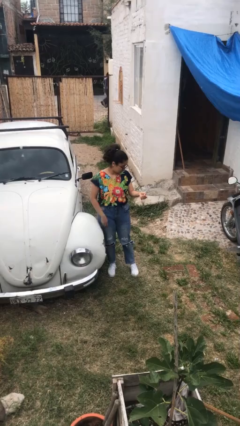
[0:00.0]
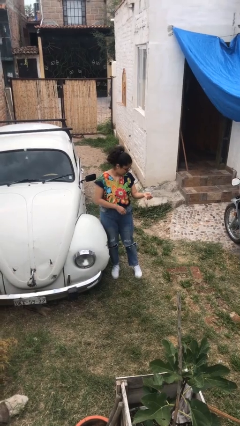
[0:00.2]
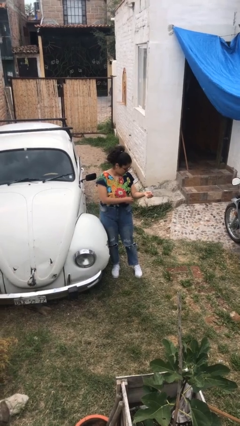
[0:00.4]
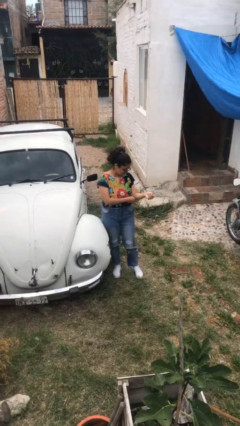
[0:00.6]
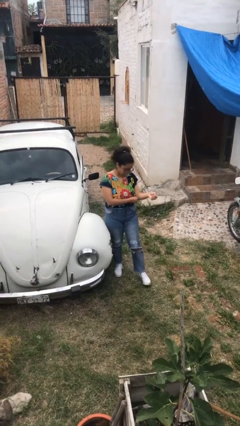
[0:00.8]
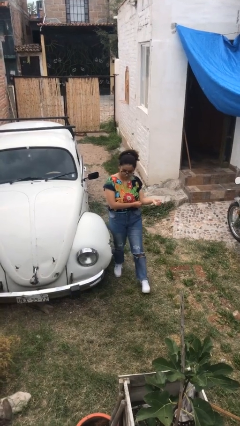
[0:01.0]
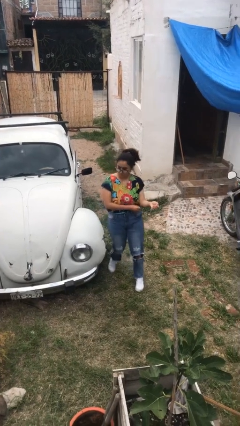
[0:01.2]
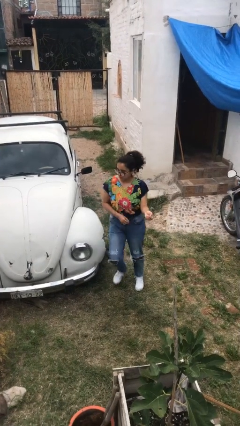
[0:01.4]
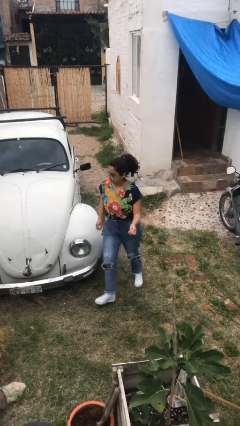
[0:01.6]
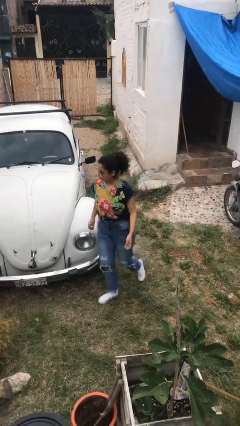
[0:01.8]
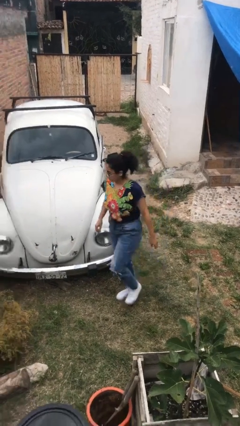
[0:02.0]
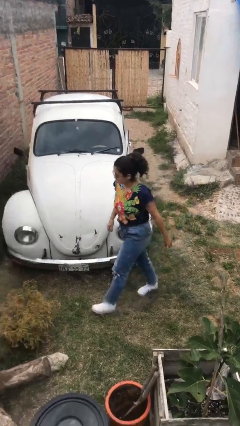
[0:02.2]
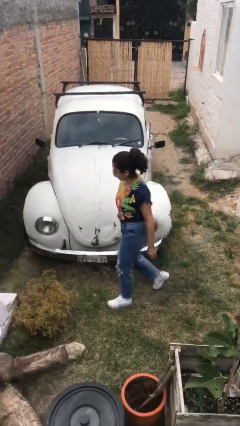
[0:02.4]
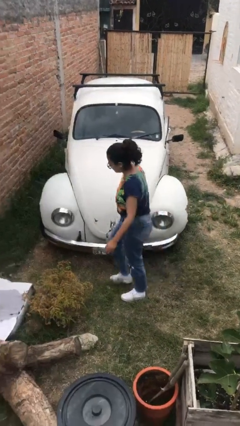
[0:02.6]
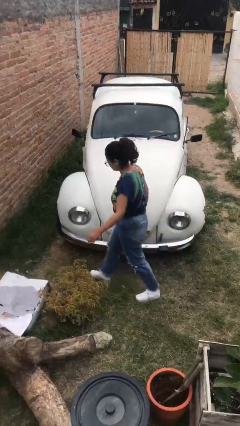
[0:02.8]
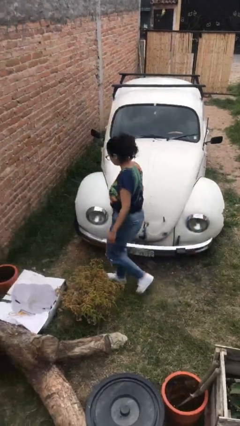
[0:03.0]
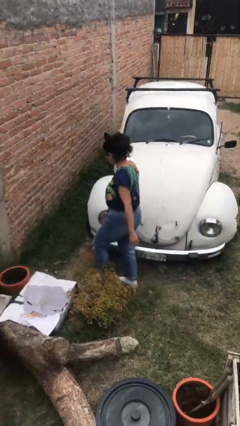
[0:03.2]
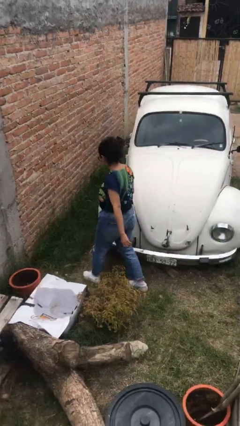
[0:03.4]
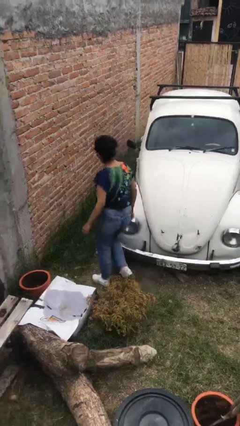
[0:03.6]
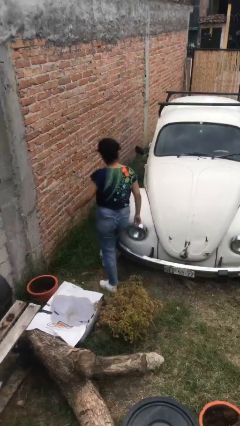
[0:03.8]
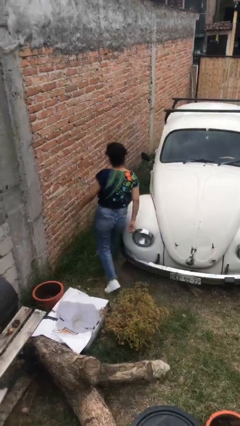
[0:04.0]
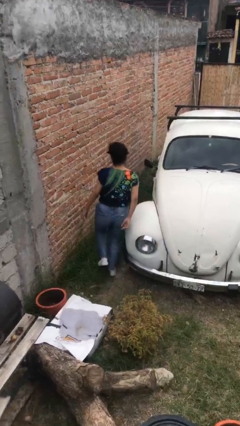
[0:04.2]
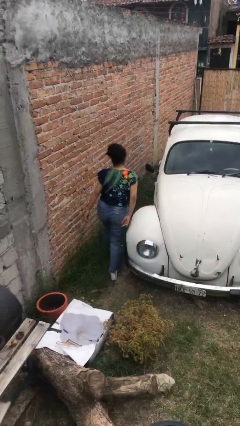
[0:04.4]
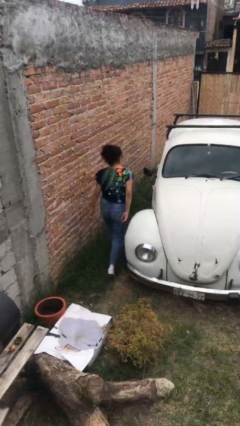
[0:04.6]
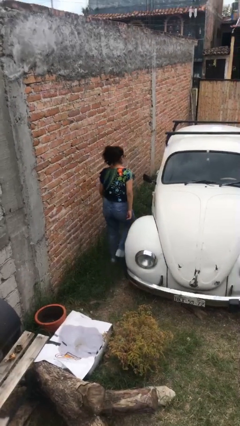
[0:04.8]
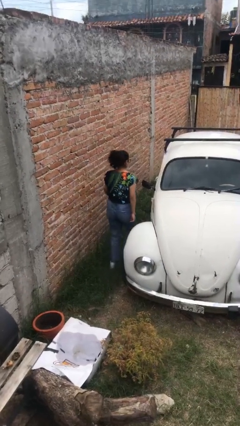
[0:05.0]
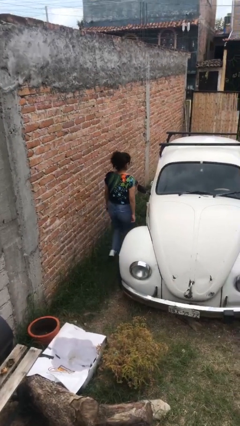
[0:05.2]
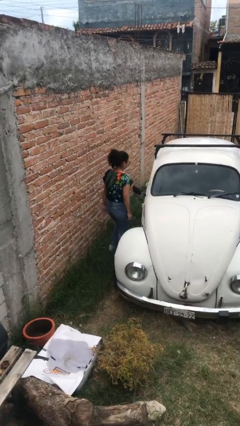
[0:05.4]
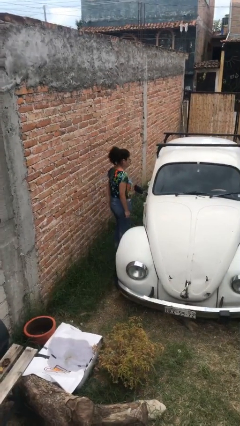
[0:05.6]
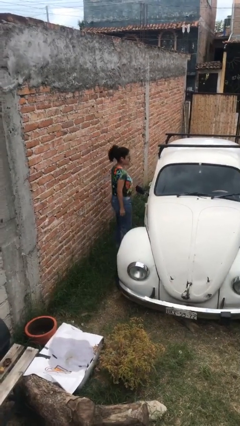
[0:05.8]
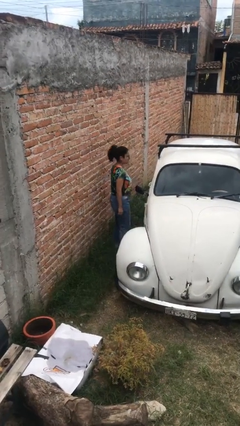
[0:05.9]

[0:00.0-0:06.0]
person walks around car

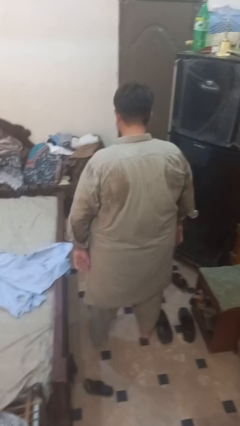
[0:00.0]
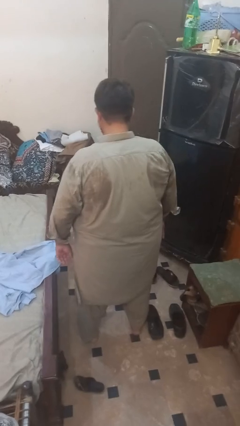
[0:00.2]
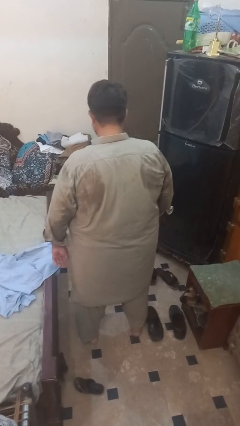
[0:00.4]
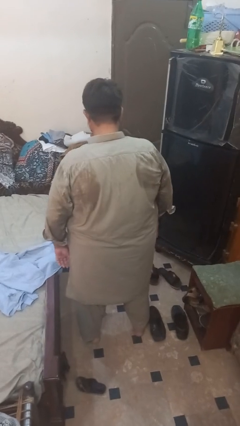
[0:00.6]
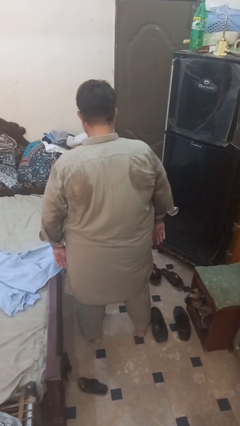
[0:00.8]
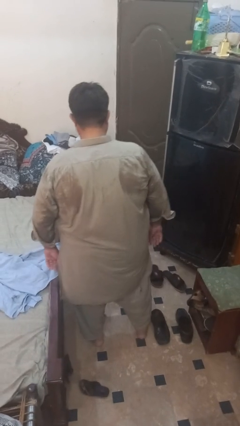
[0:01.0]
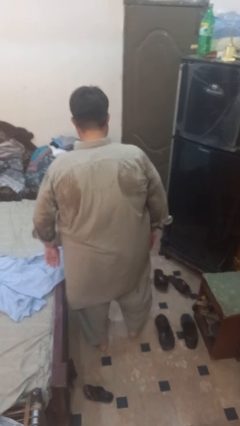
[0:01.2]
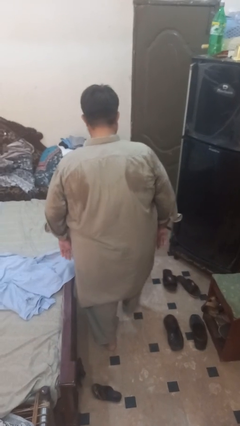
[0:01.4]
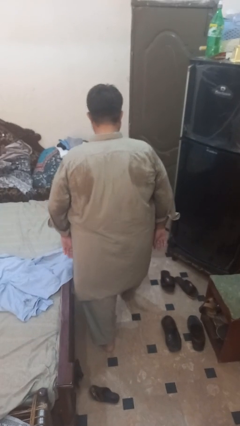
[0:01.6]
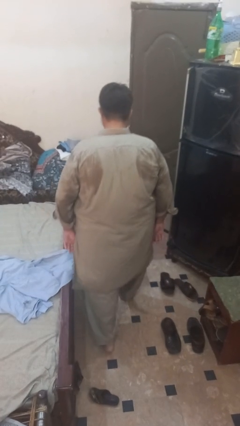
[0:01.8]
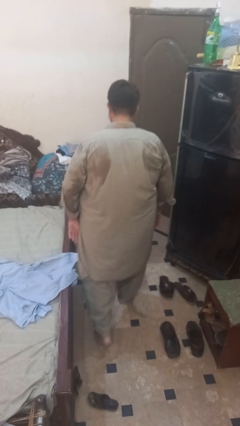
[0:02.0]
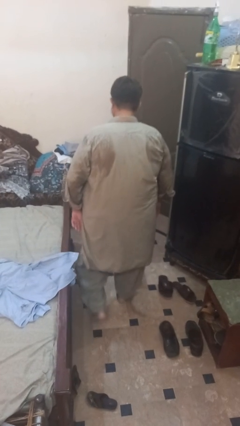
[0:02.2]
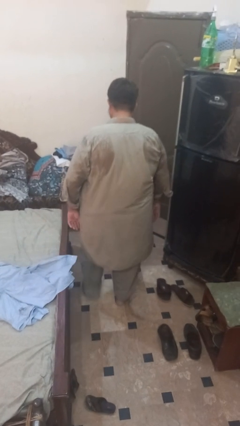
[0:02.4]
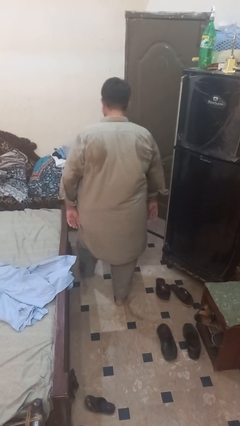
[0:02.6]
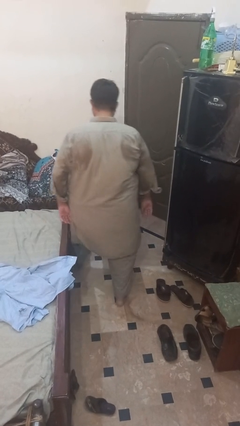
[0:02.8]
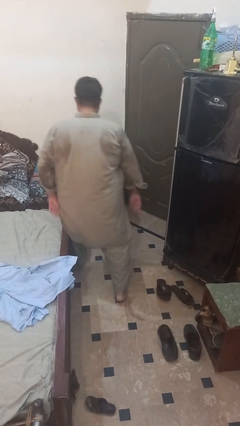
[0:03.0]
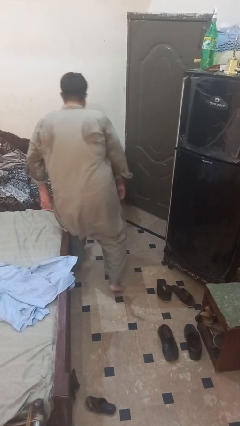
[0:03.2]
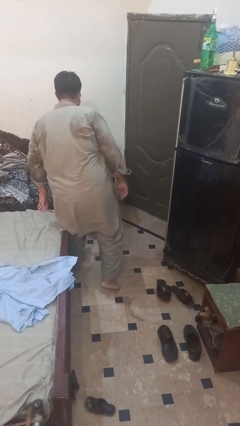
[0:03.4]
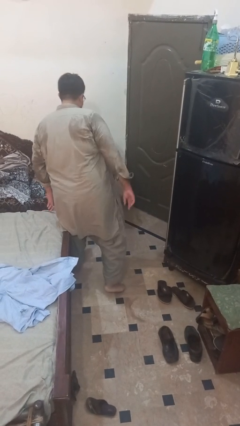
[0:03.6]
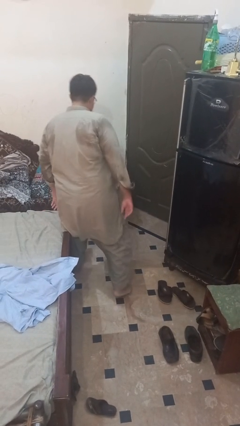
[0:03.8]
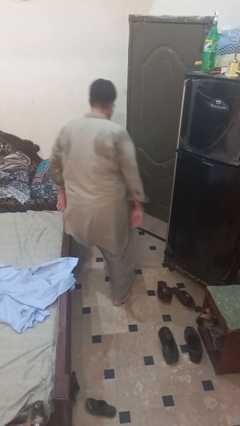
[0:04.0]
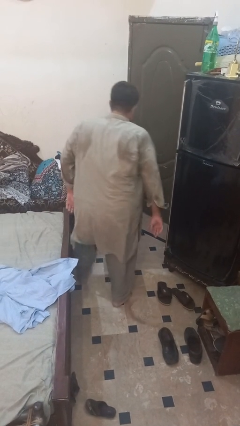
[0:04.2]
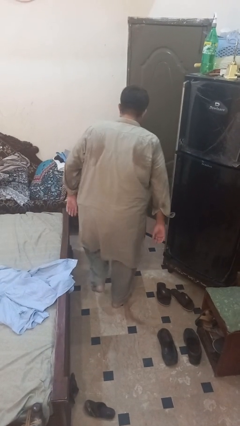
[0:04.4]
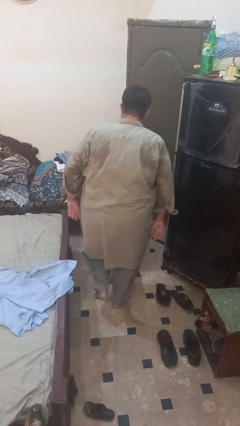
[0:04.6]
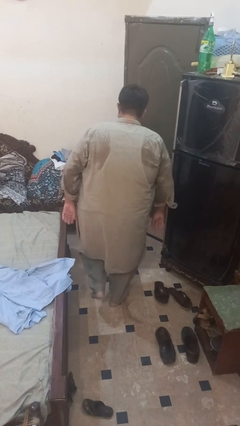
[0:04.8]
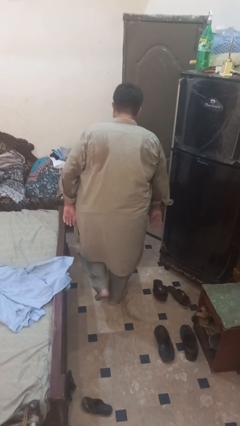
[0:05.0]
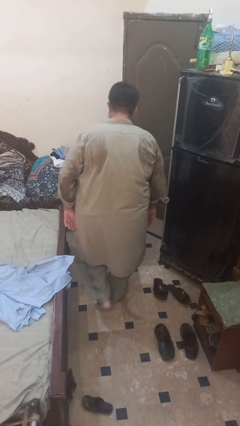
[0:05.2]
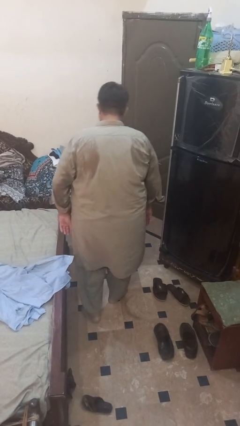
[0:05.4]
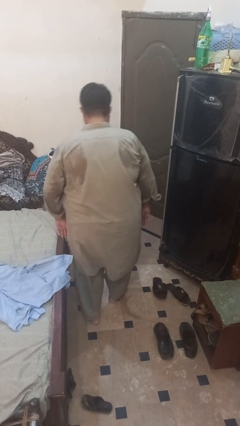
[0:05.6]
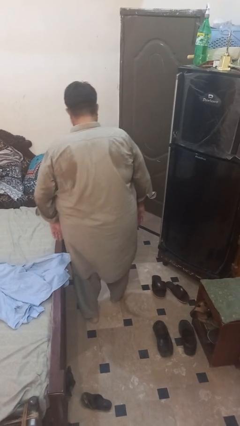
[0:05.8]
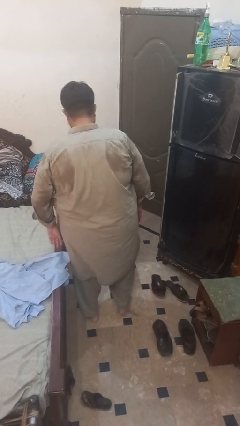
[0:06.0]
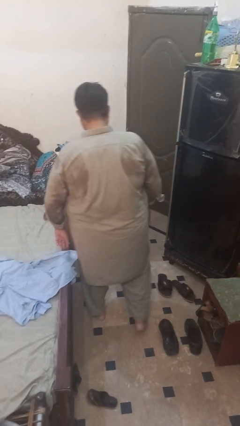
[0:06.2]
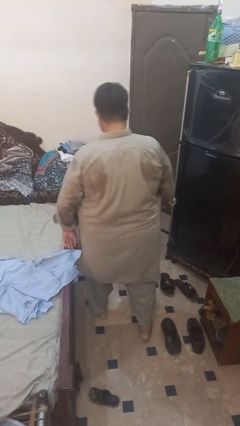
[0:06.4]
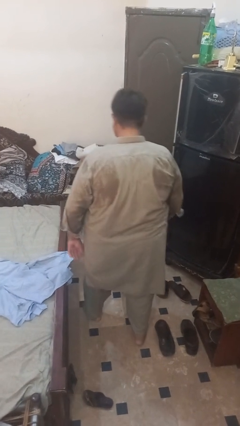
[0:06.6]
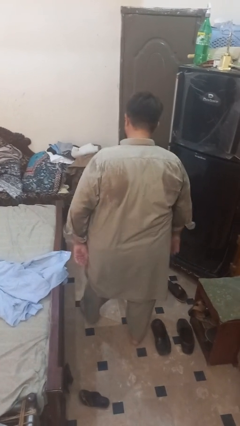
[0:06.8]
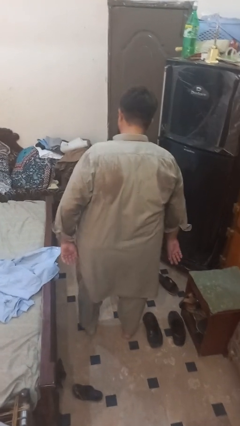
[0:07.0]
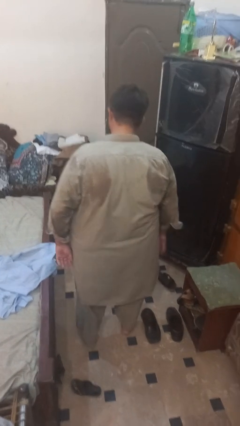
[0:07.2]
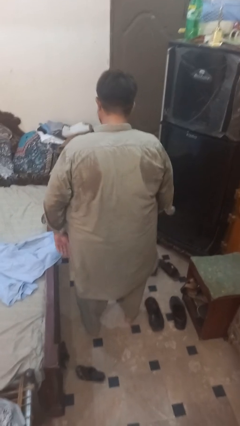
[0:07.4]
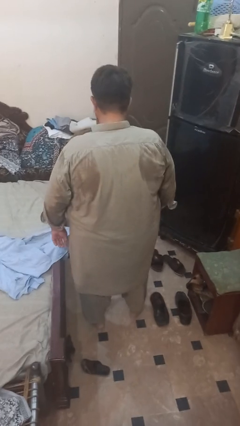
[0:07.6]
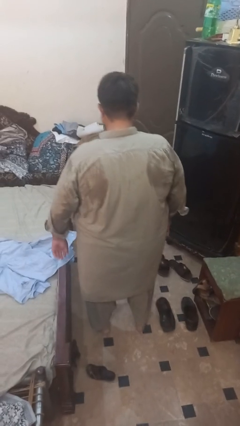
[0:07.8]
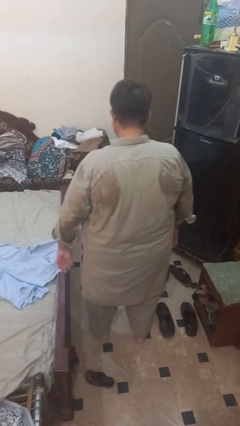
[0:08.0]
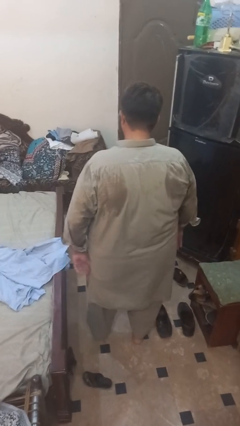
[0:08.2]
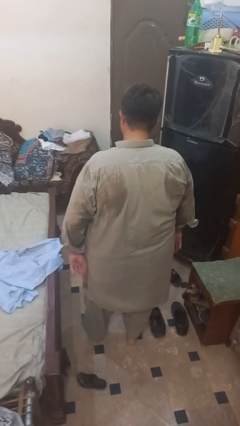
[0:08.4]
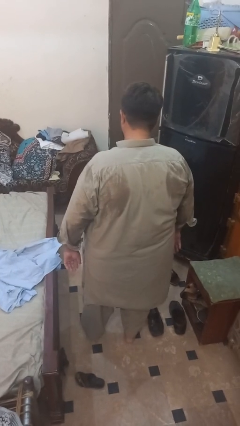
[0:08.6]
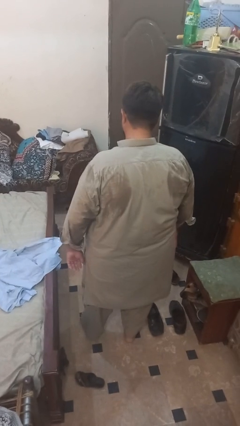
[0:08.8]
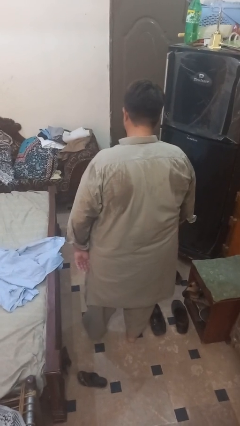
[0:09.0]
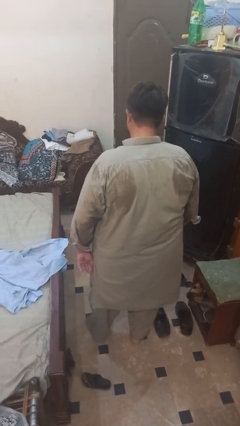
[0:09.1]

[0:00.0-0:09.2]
person stubs toe

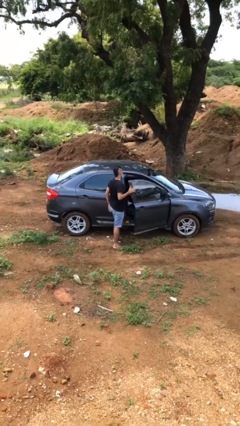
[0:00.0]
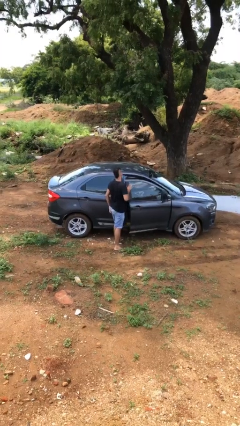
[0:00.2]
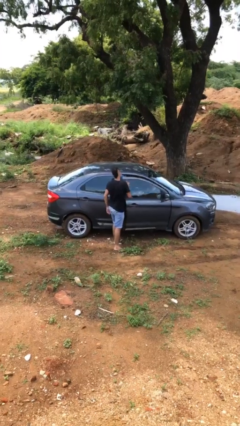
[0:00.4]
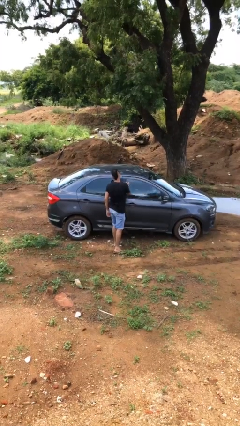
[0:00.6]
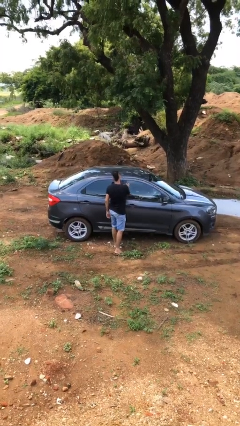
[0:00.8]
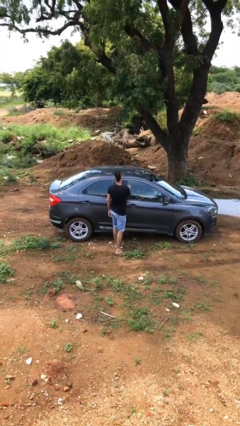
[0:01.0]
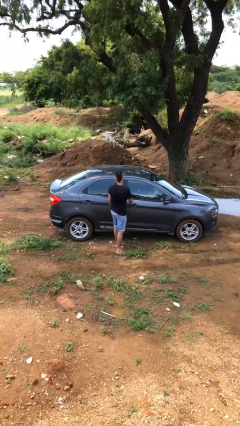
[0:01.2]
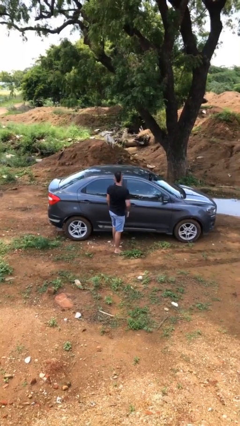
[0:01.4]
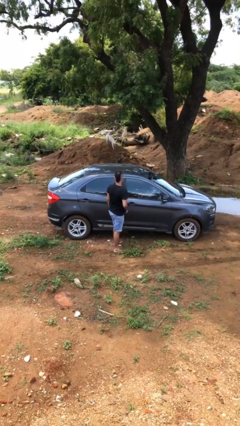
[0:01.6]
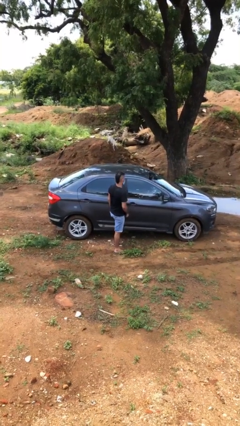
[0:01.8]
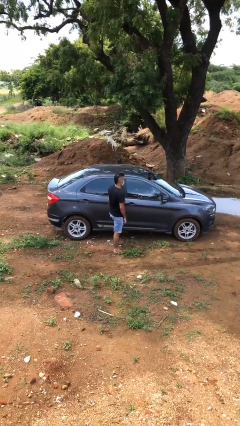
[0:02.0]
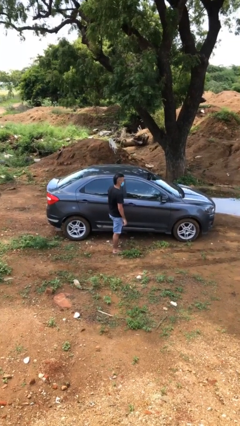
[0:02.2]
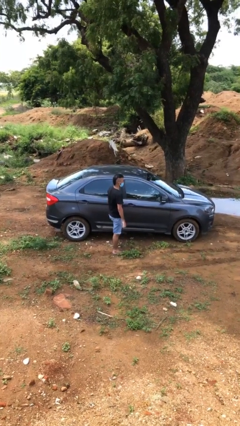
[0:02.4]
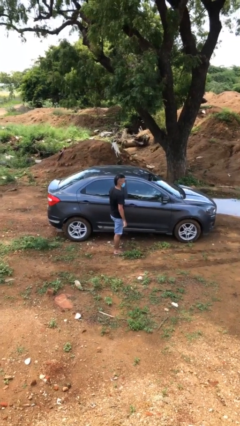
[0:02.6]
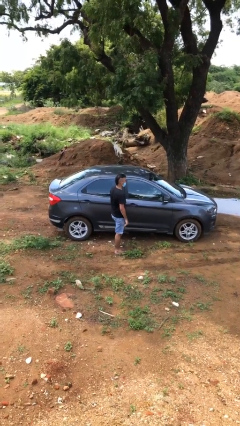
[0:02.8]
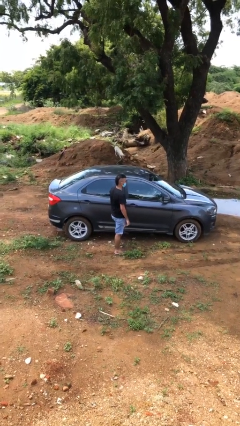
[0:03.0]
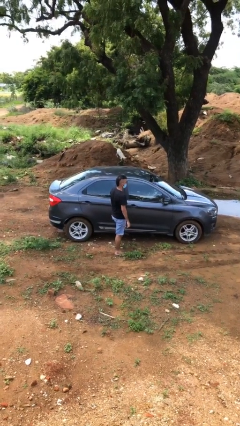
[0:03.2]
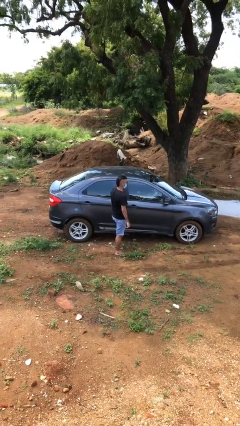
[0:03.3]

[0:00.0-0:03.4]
person closes car door
